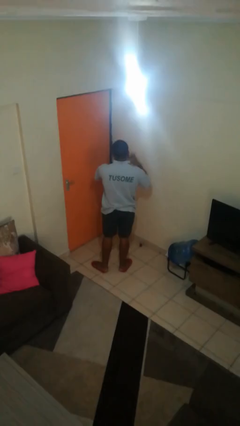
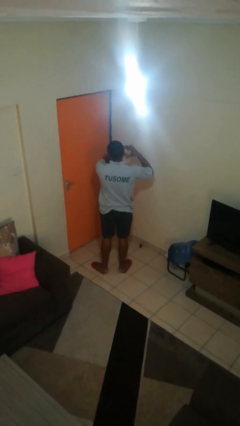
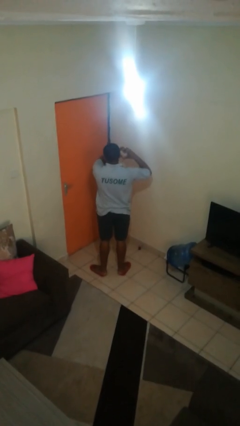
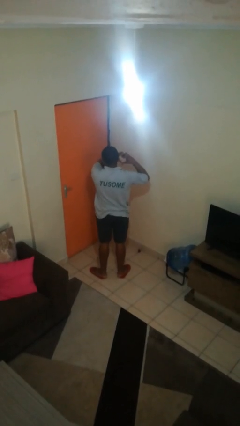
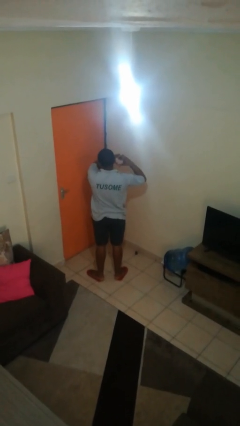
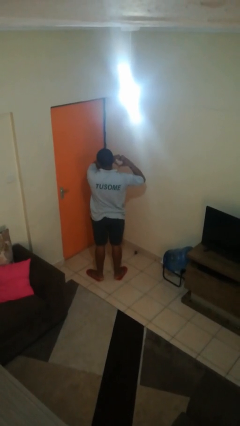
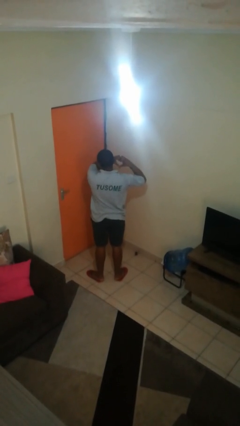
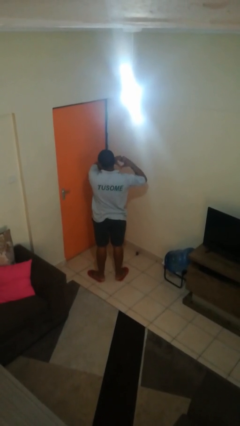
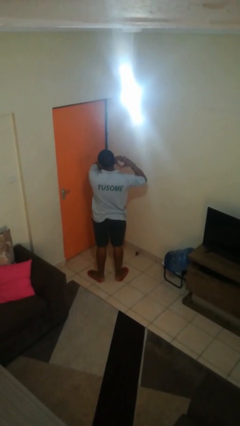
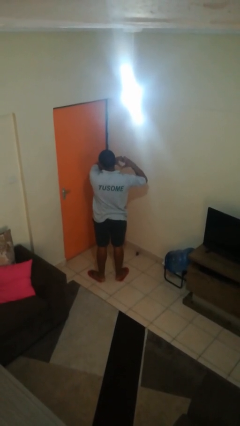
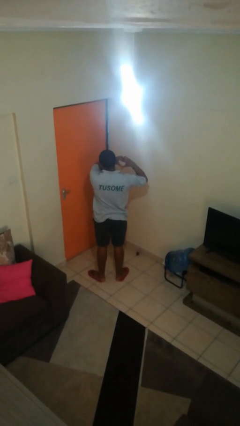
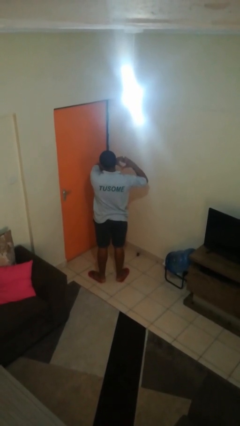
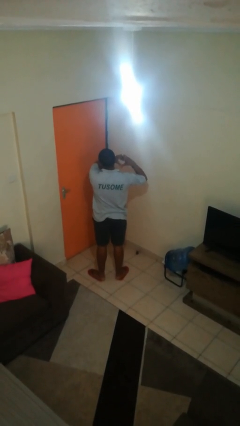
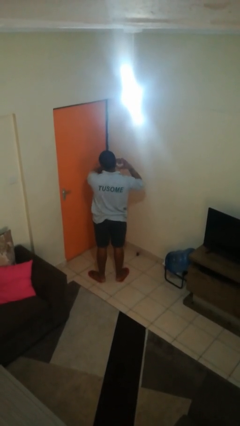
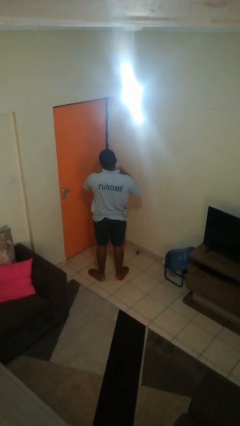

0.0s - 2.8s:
person gestures heart

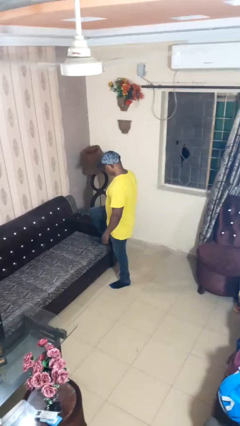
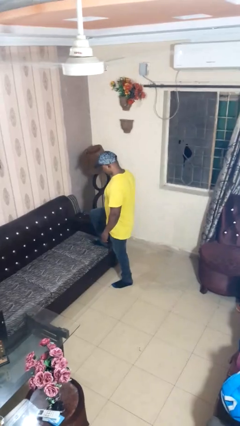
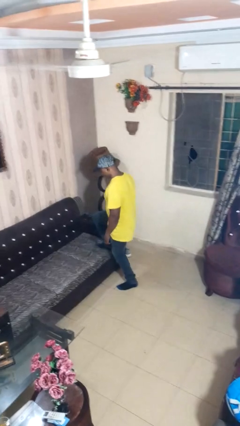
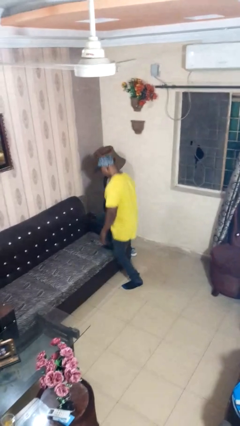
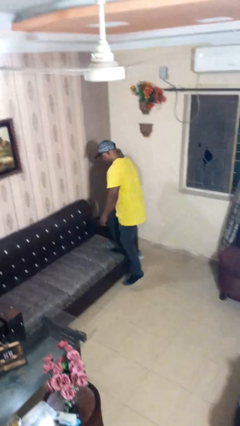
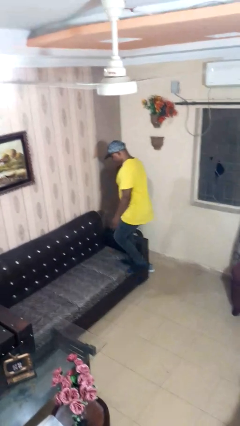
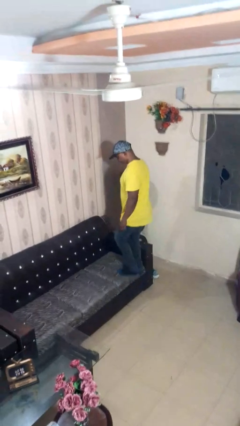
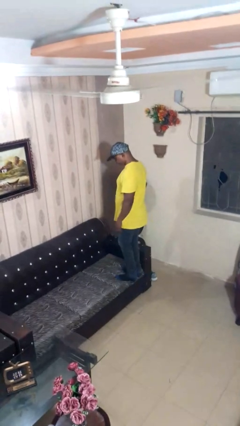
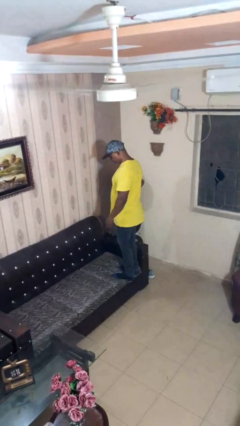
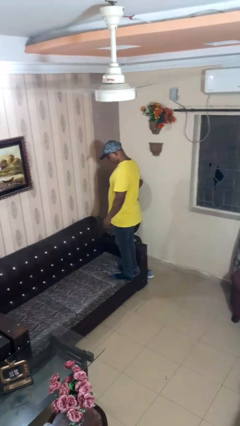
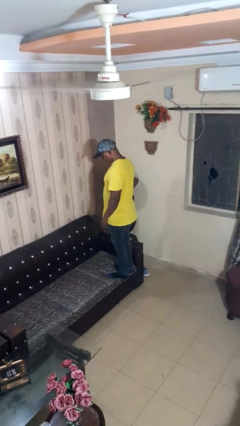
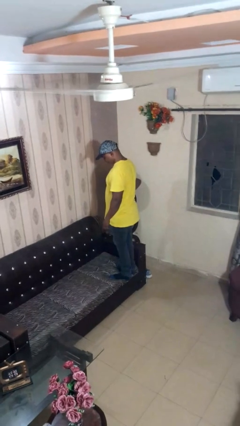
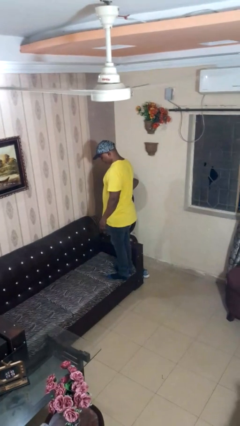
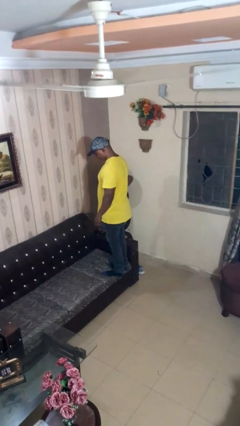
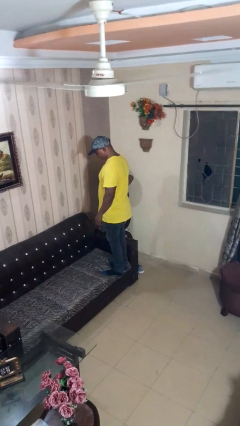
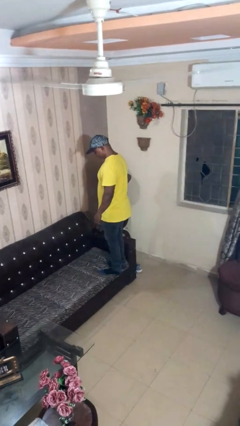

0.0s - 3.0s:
person climbs on couch

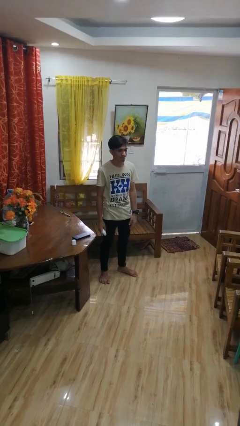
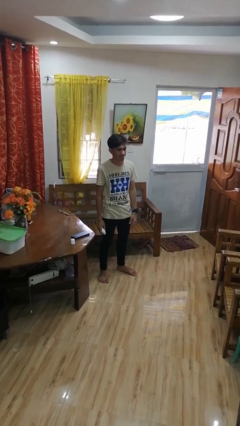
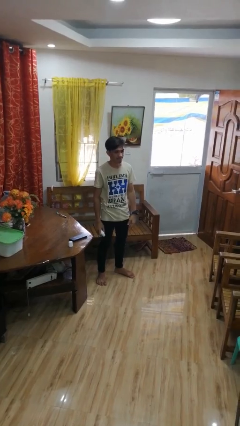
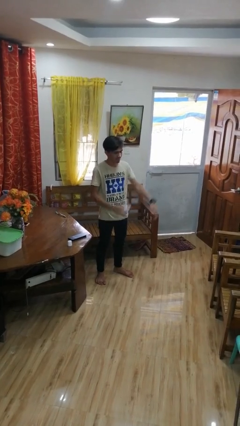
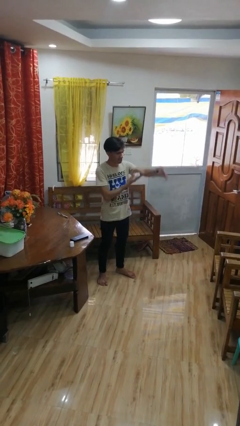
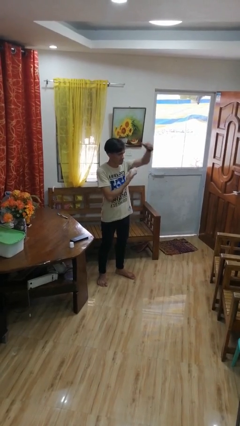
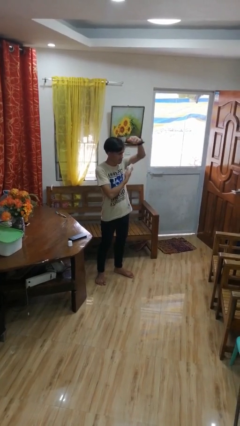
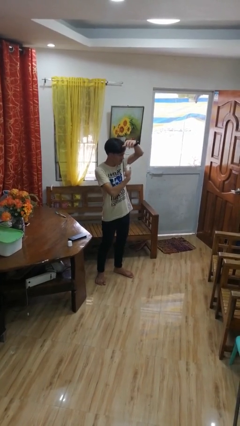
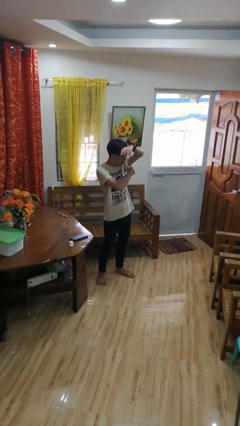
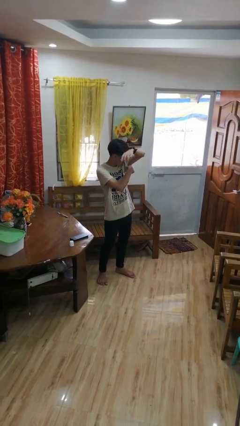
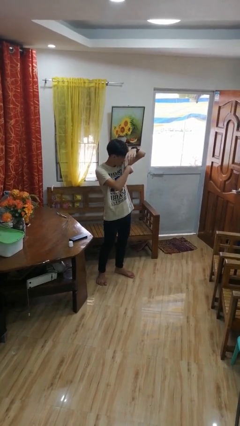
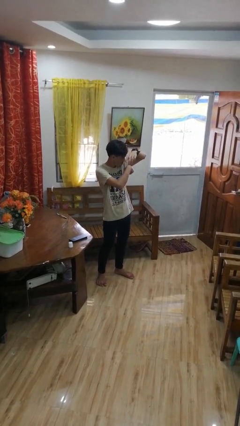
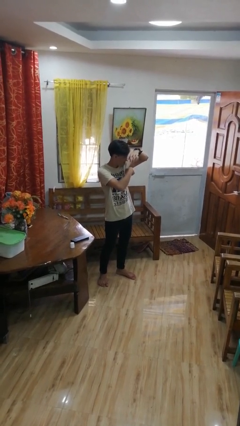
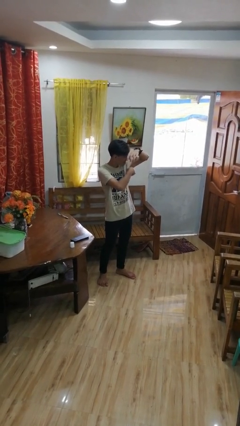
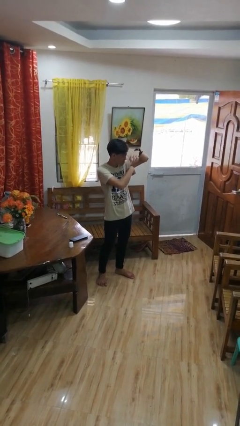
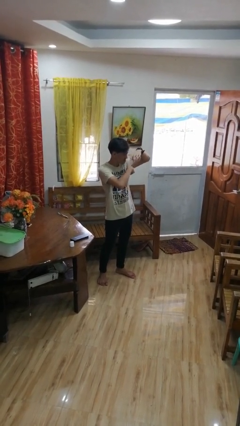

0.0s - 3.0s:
person applies deodorant

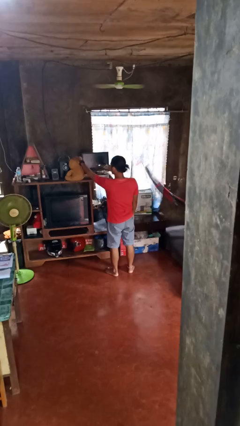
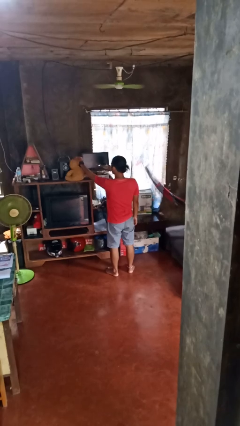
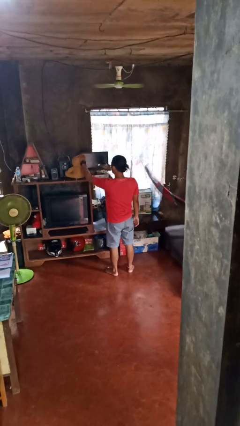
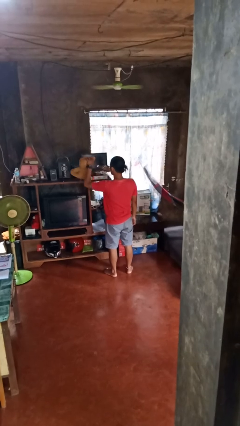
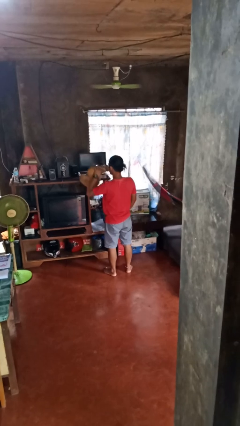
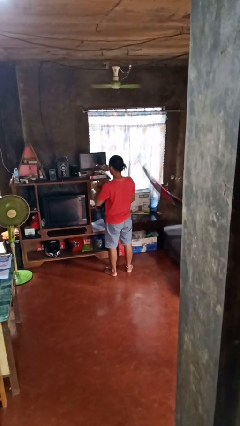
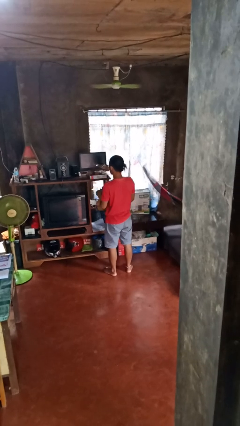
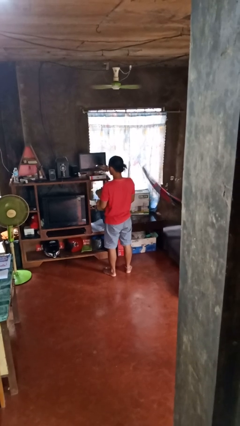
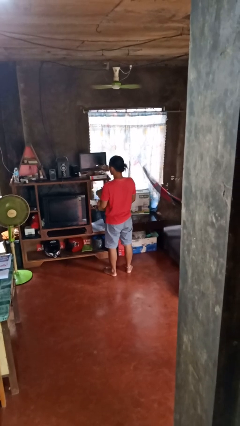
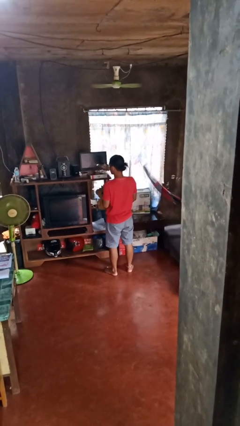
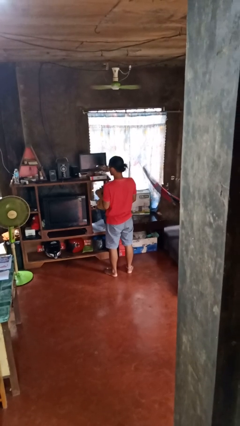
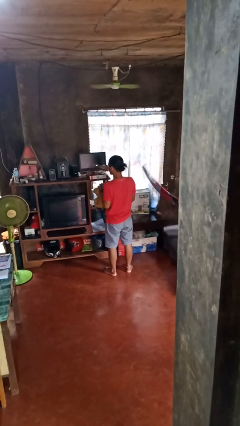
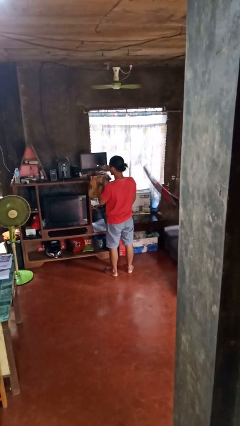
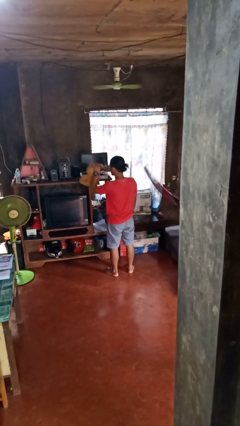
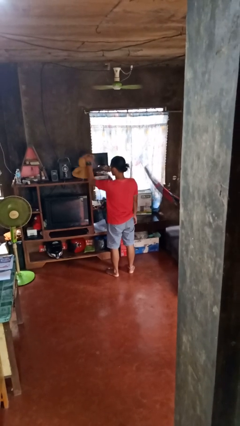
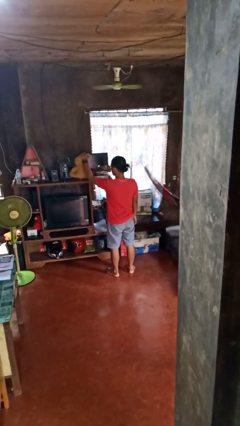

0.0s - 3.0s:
person picks up object from shelf

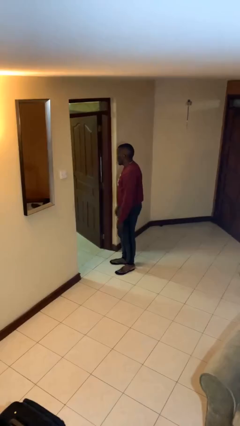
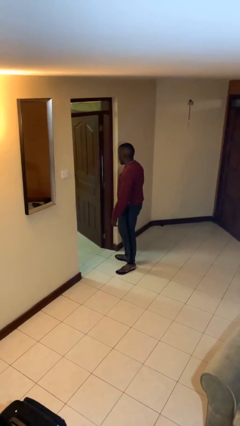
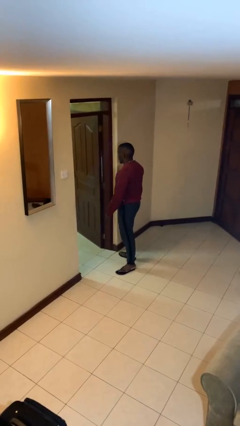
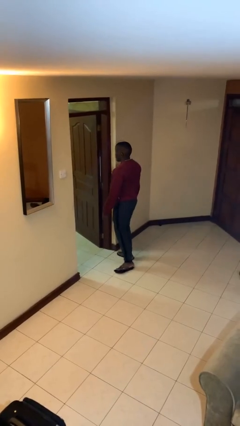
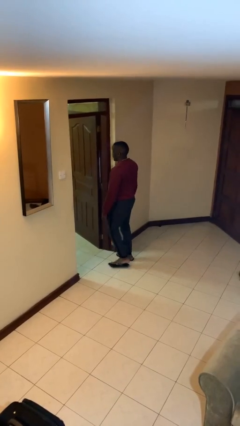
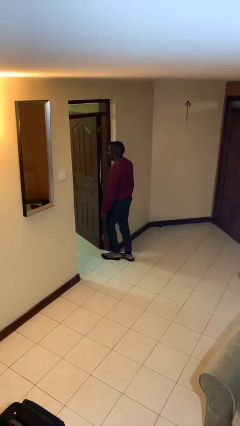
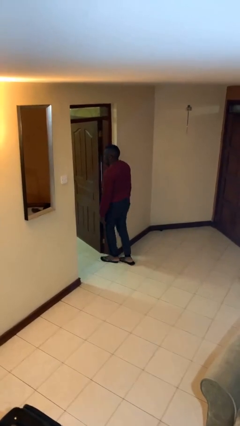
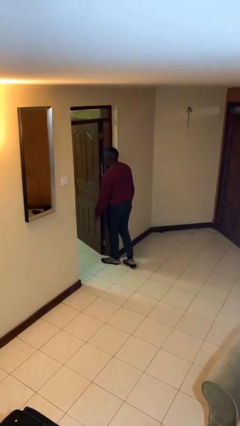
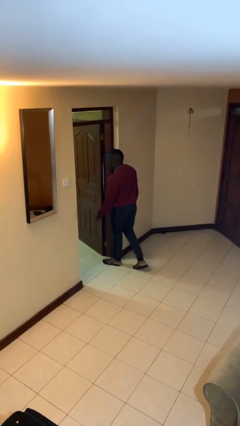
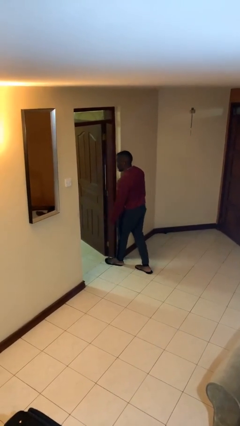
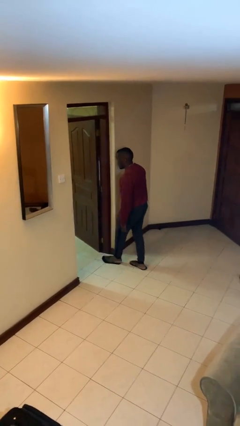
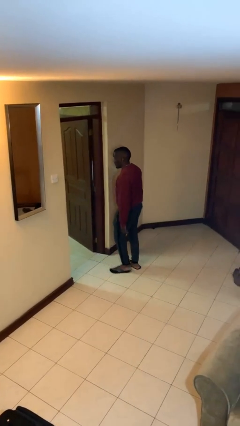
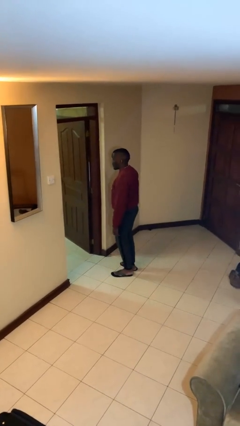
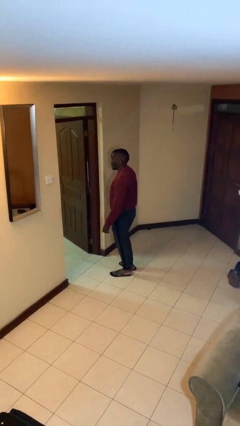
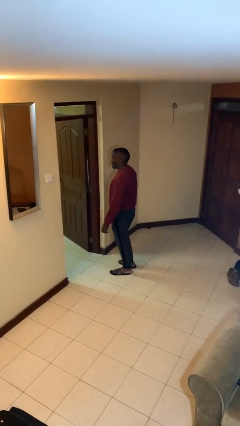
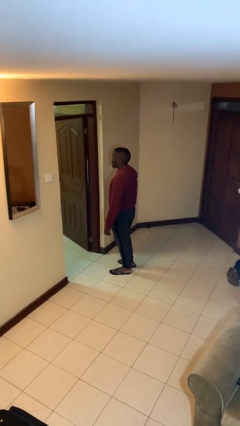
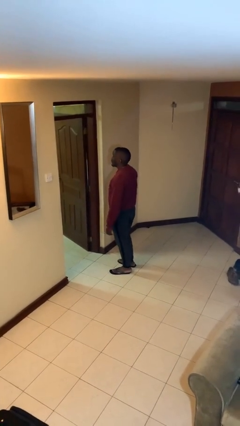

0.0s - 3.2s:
person bumps into wall

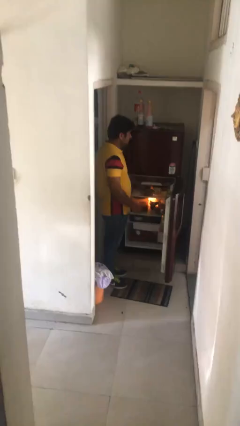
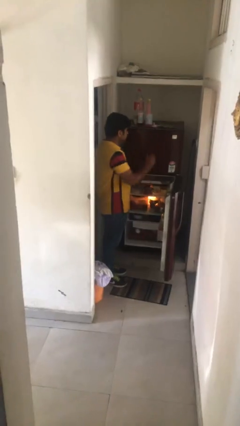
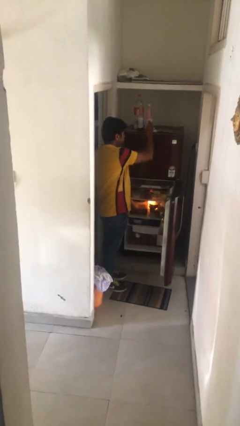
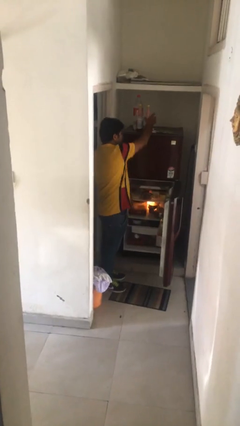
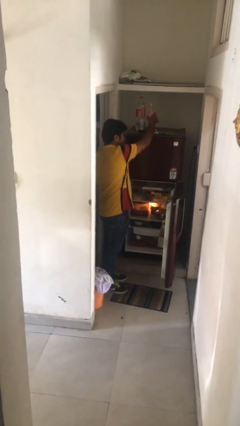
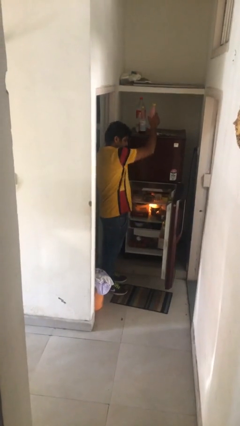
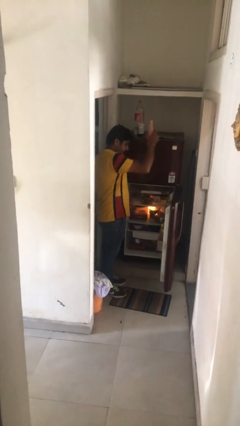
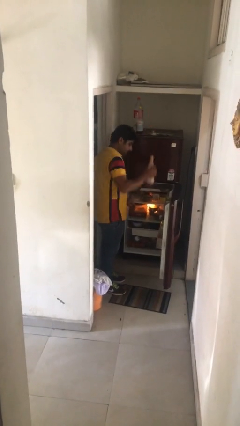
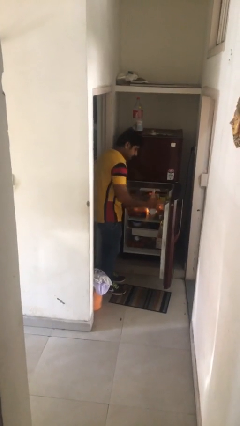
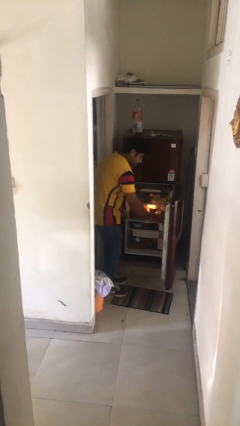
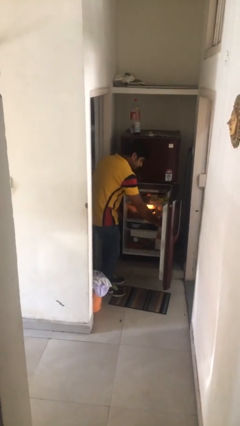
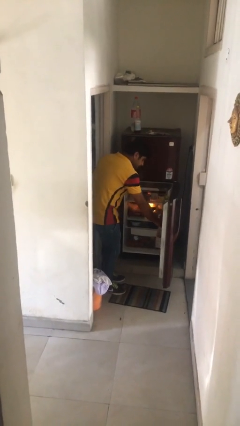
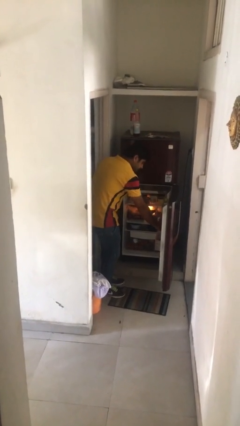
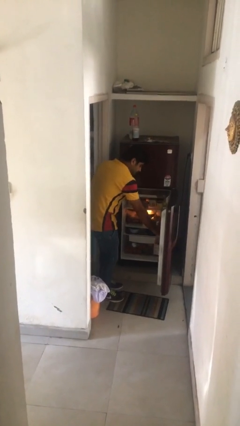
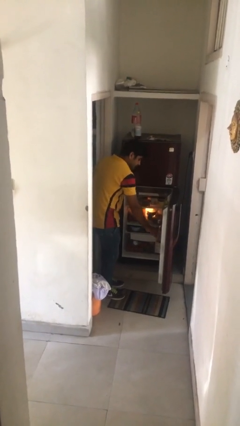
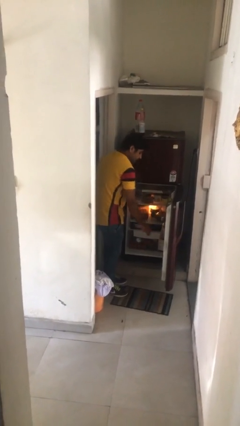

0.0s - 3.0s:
person loads groceries into refrigerator
